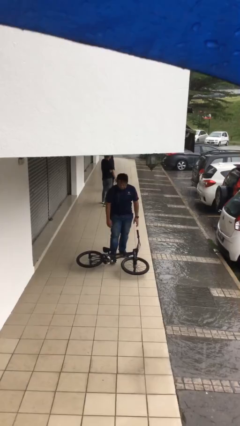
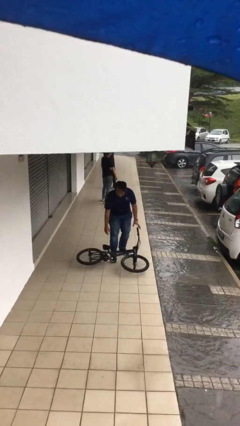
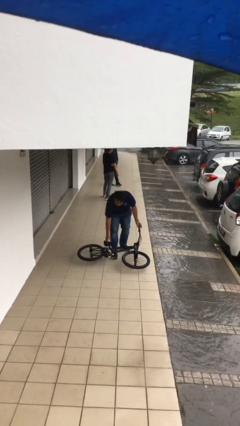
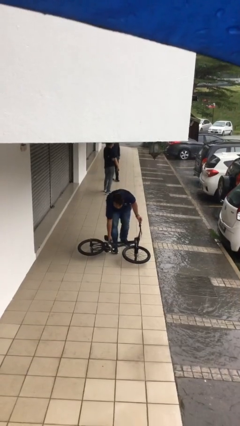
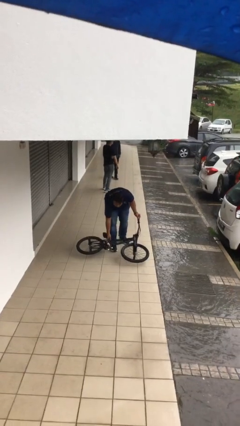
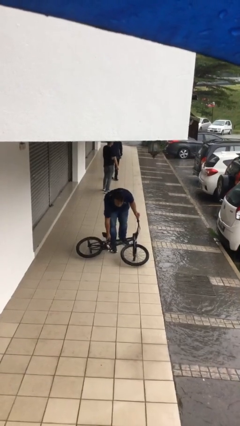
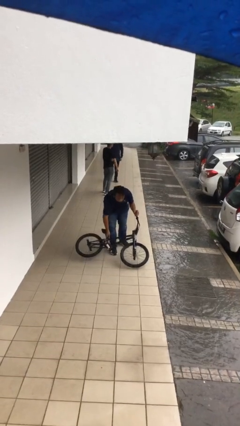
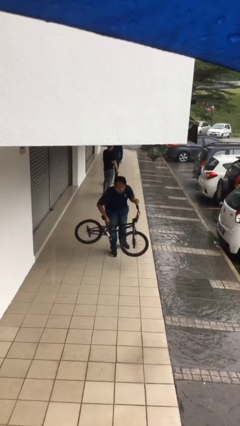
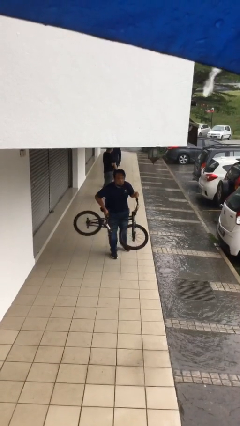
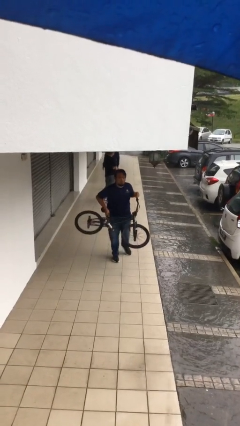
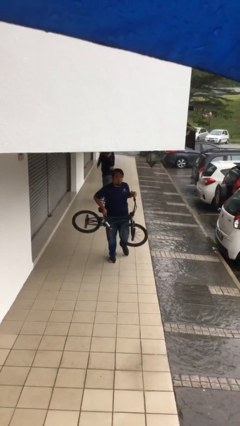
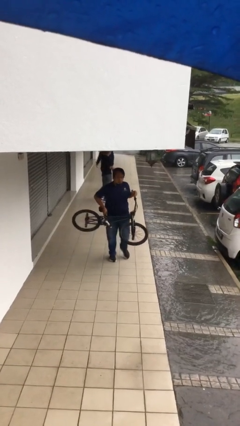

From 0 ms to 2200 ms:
person picks up object from floor

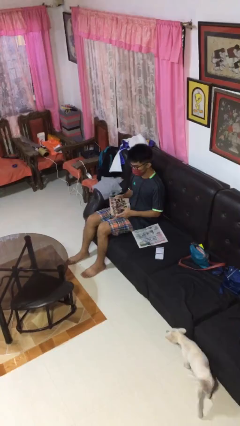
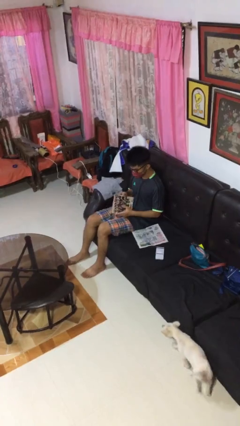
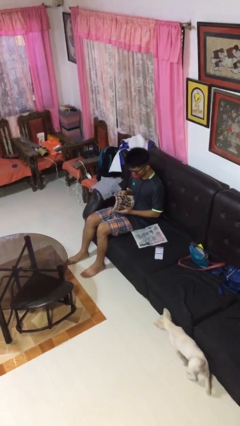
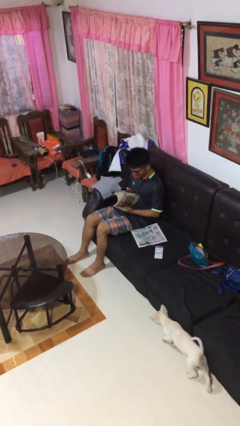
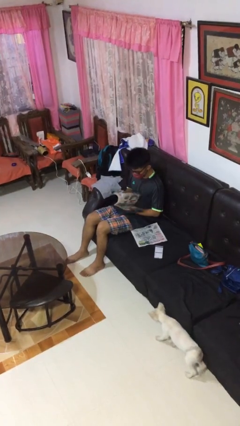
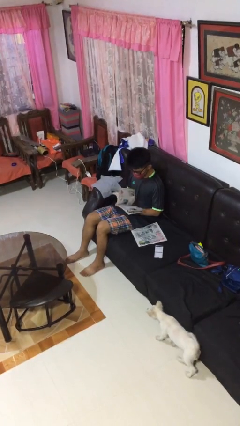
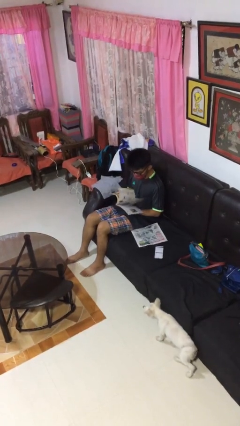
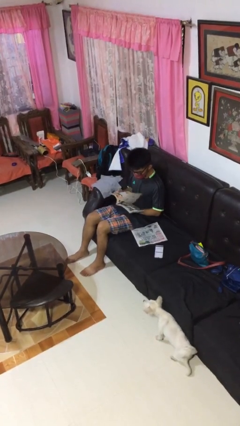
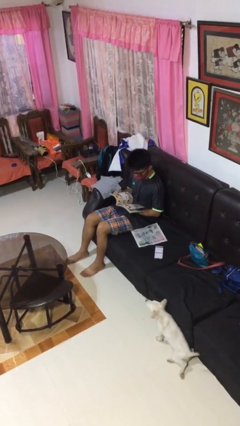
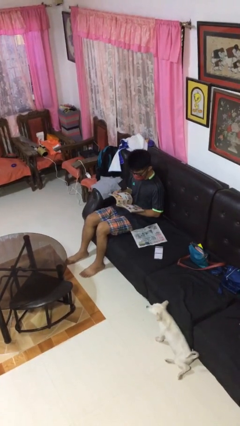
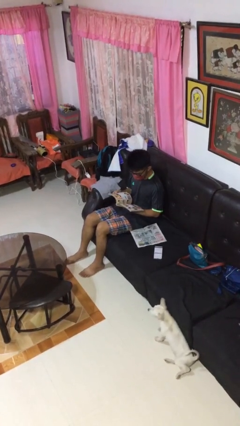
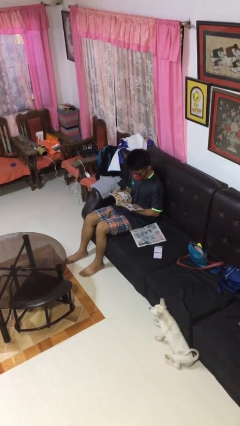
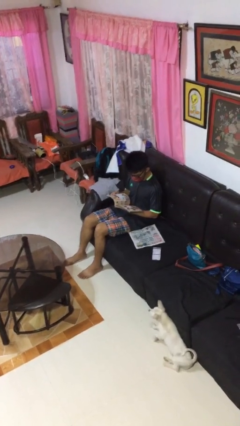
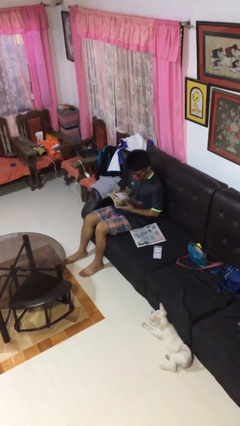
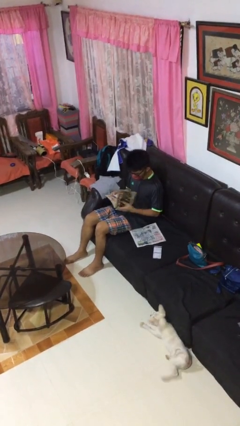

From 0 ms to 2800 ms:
person reads magazine

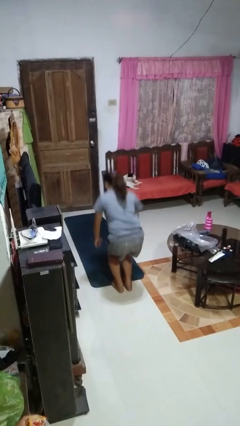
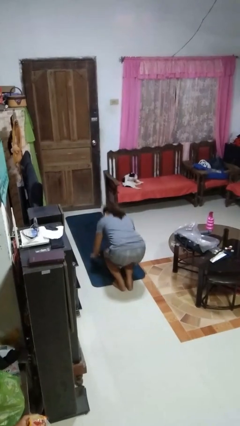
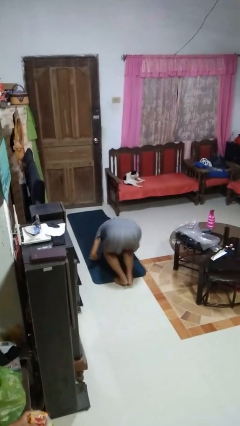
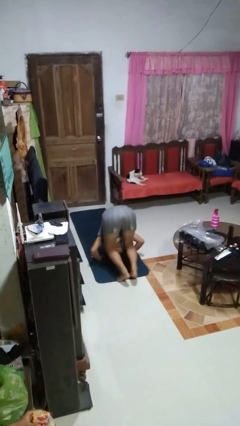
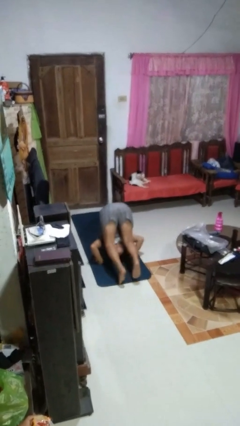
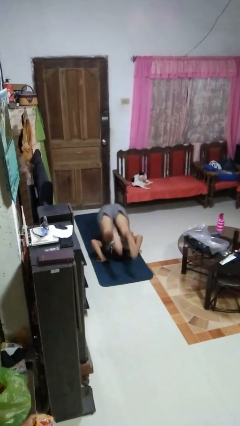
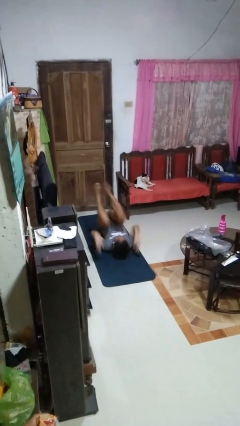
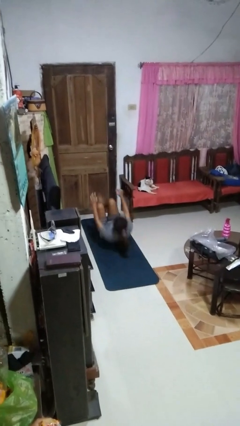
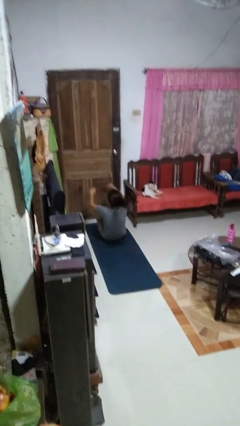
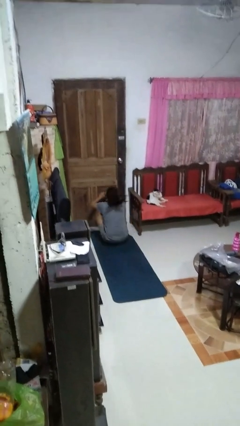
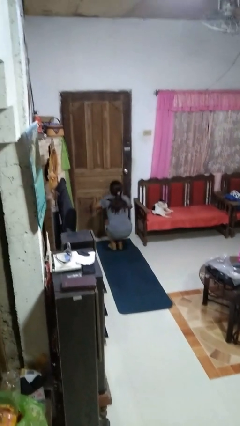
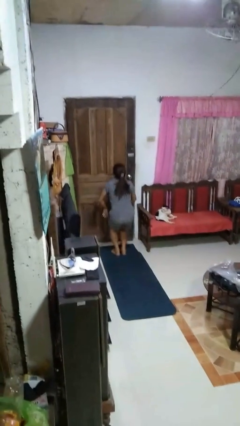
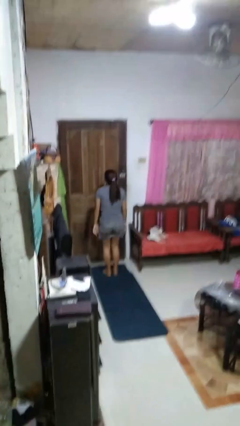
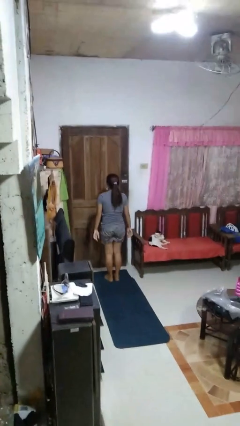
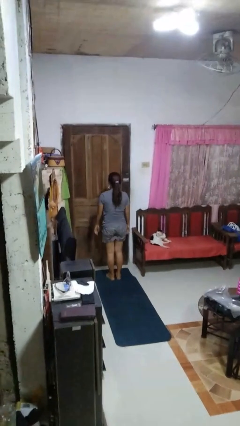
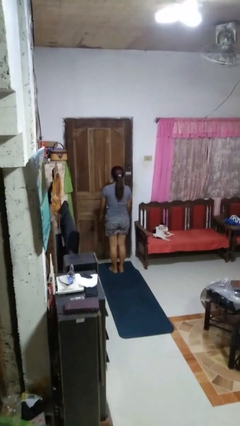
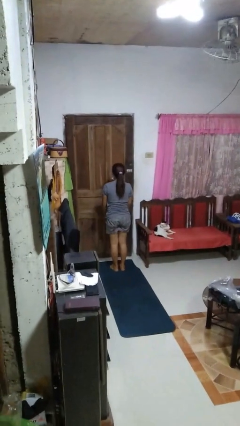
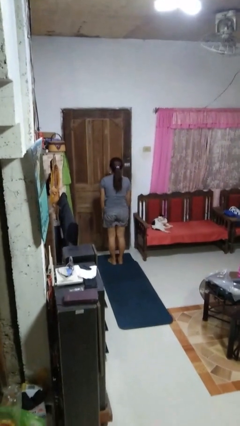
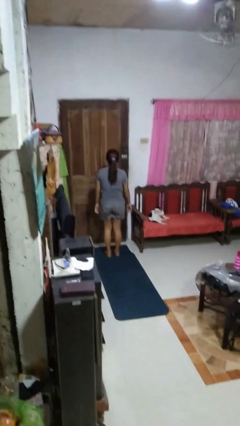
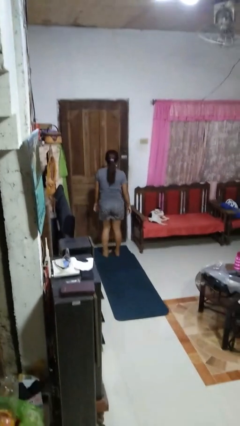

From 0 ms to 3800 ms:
person somersaults

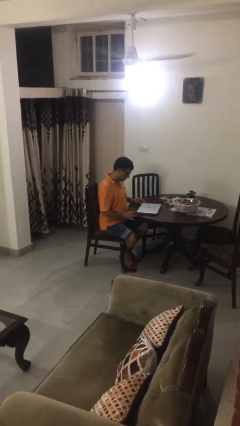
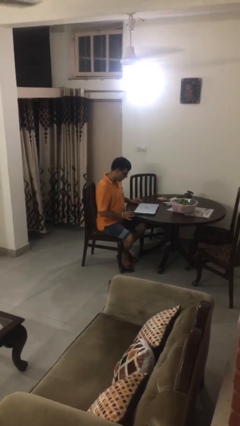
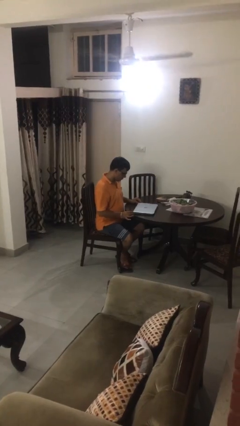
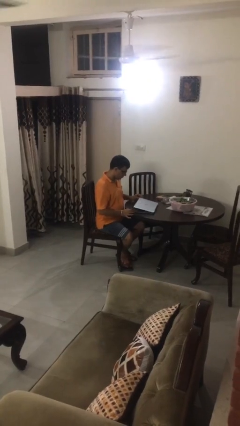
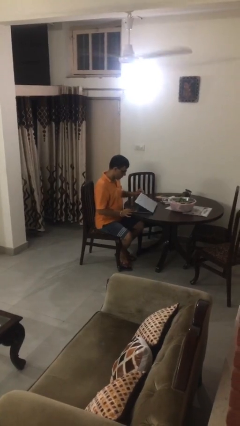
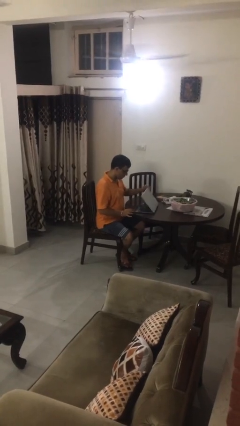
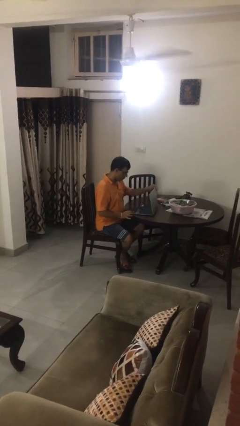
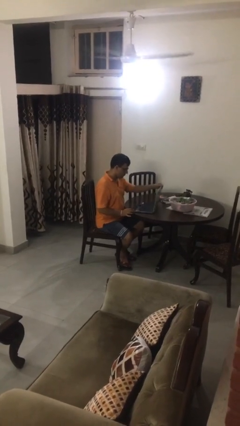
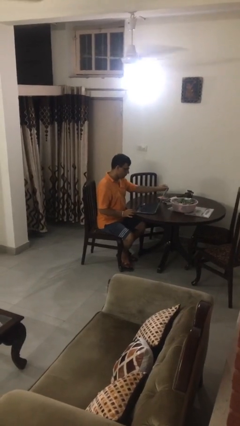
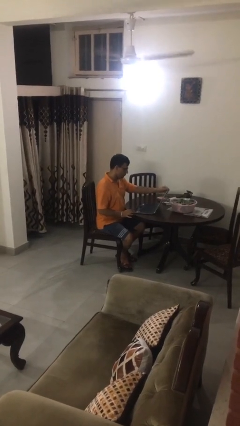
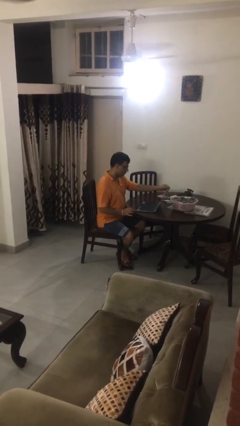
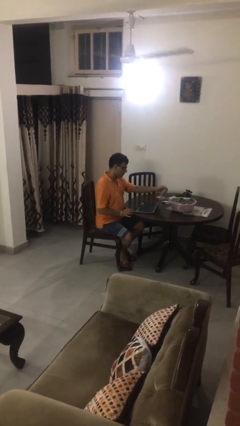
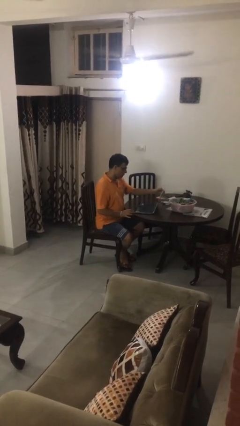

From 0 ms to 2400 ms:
person opens laptop

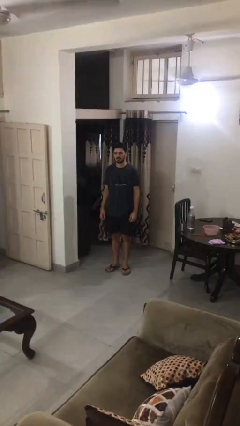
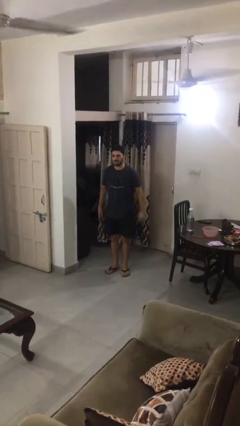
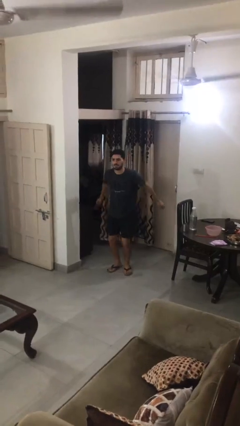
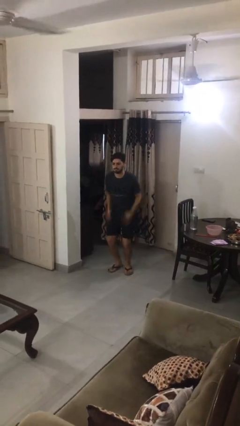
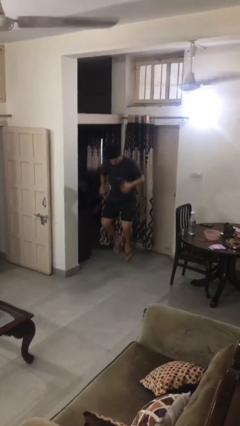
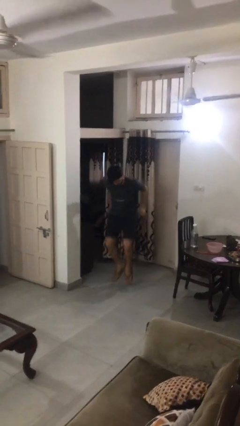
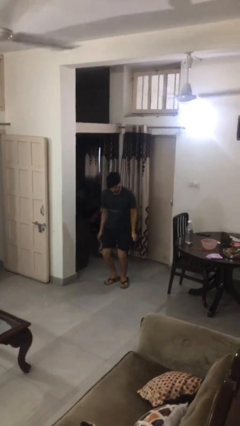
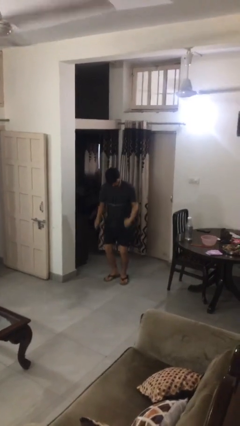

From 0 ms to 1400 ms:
person jumps

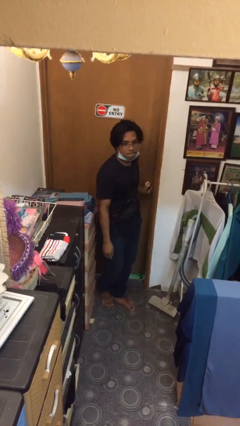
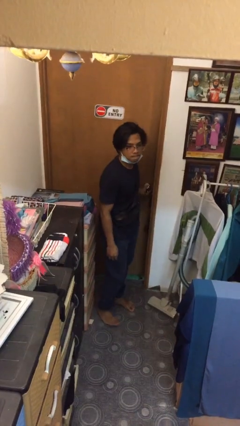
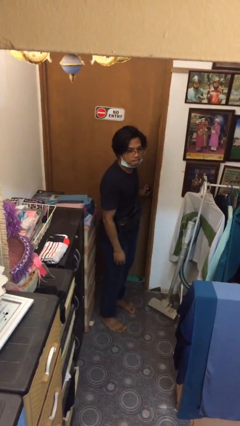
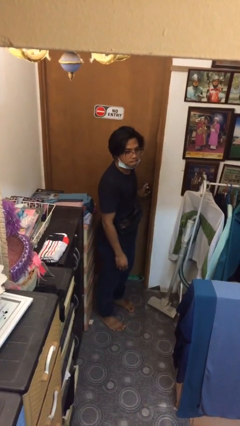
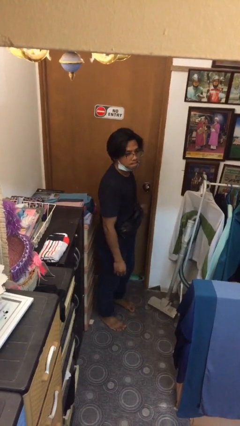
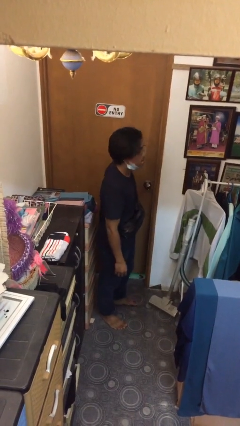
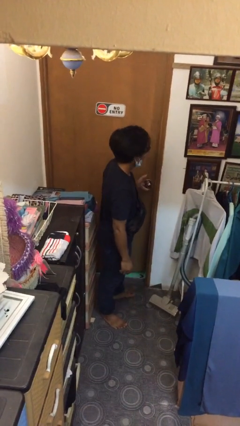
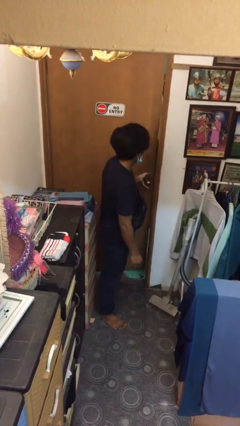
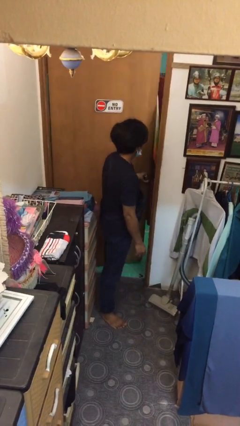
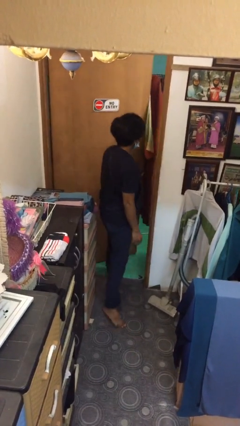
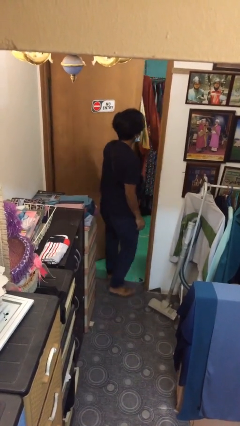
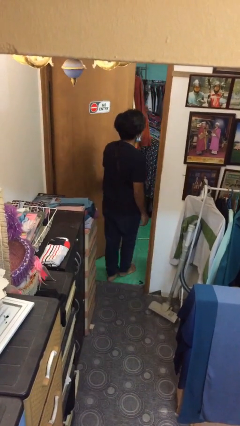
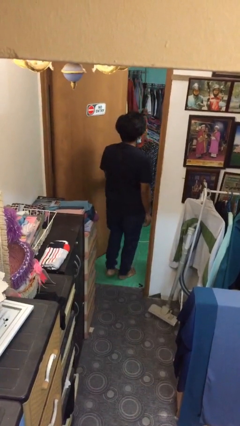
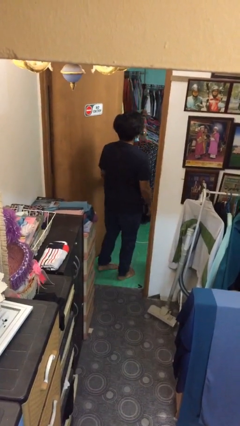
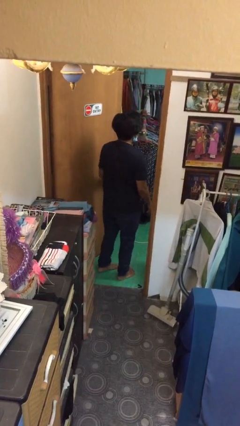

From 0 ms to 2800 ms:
person opens facility door

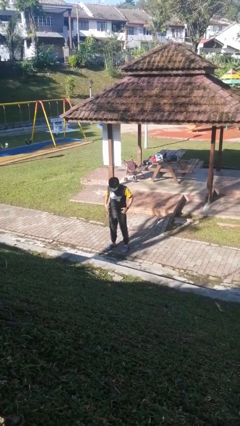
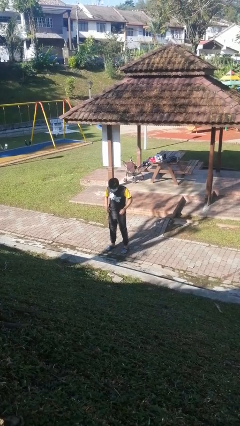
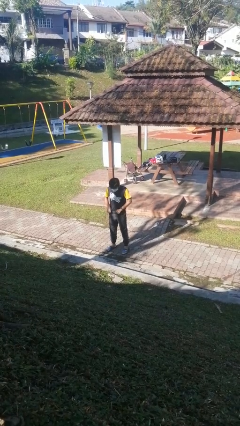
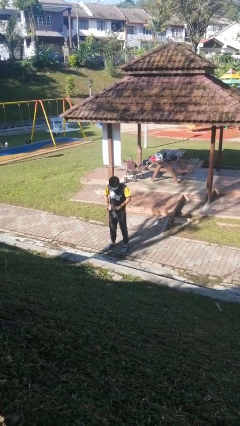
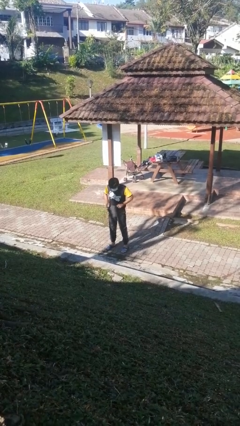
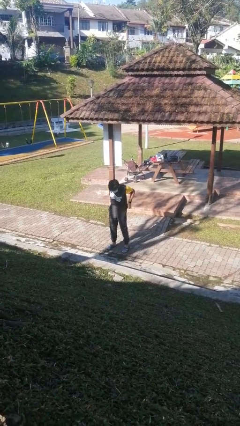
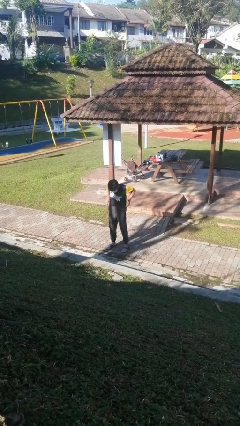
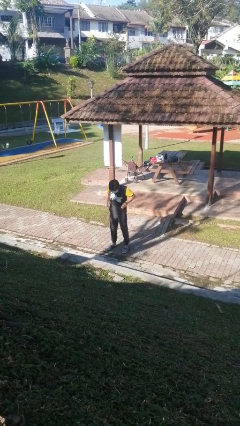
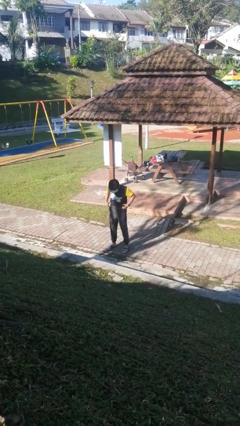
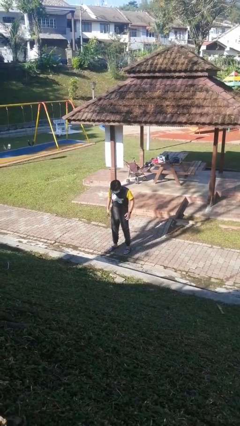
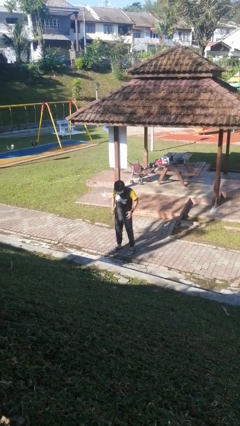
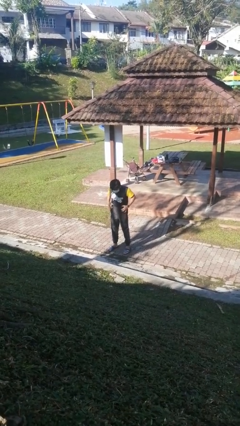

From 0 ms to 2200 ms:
person hikes up pants
